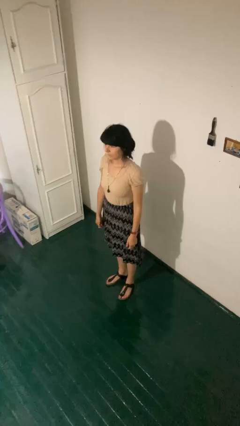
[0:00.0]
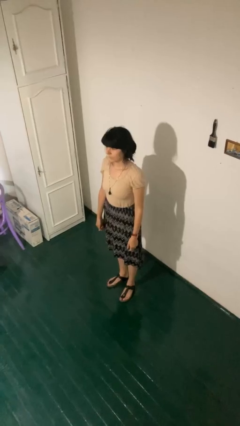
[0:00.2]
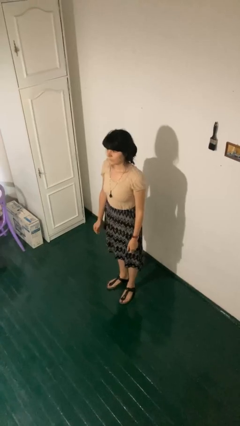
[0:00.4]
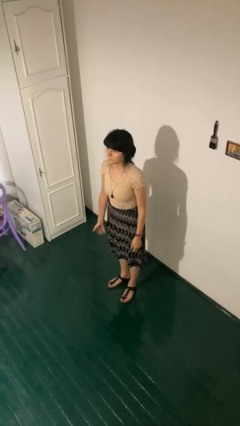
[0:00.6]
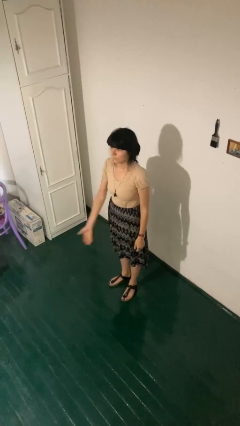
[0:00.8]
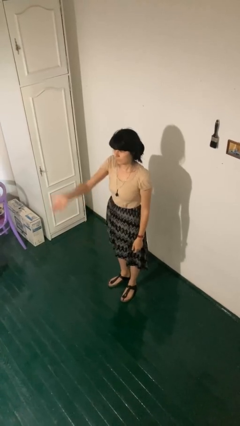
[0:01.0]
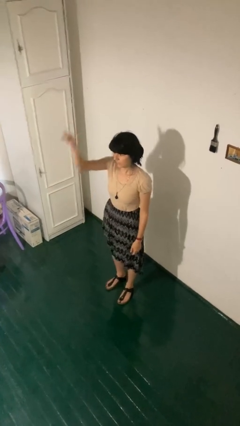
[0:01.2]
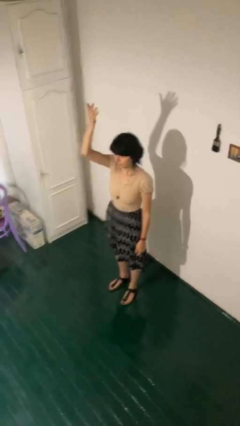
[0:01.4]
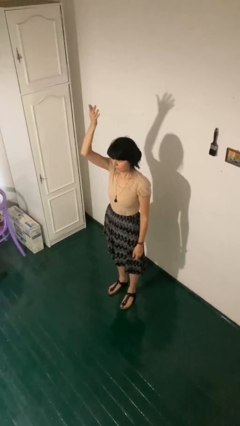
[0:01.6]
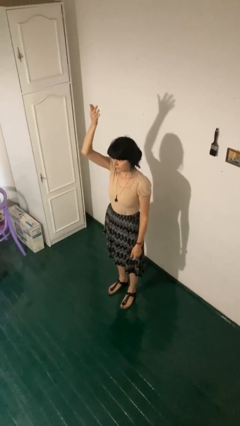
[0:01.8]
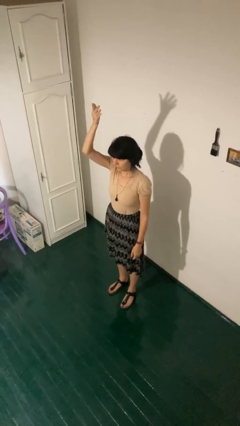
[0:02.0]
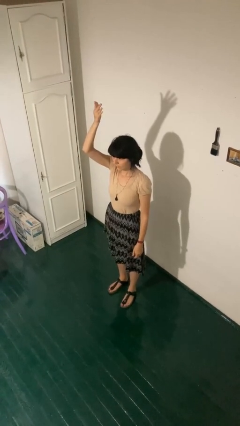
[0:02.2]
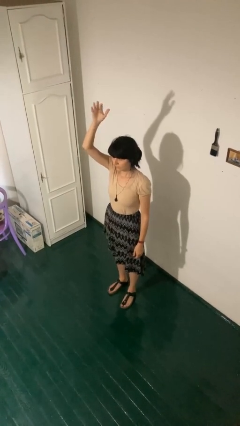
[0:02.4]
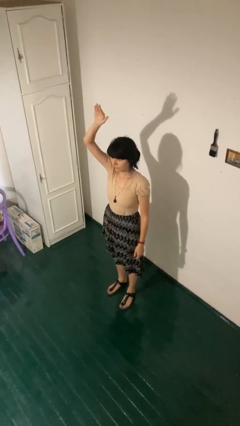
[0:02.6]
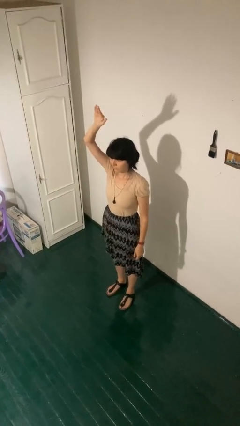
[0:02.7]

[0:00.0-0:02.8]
person gestures swipe up

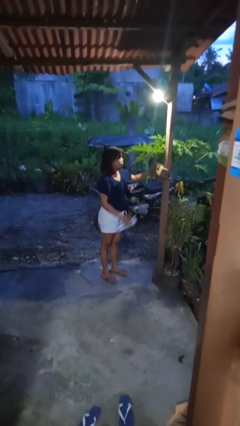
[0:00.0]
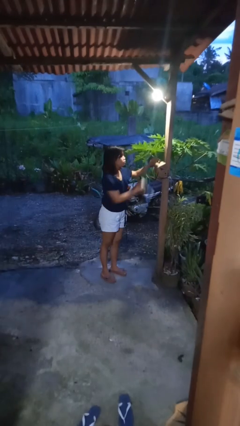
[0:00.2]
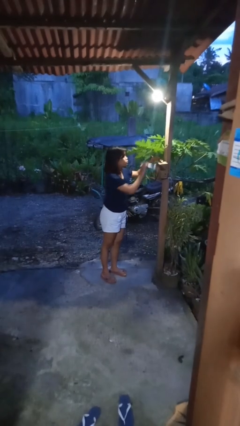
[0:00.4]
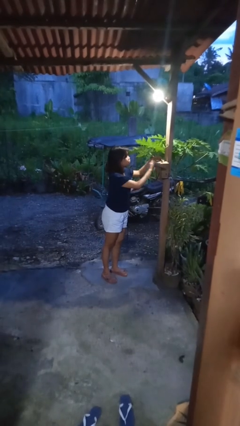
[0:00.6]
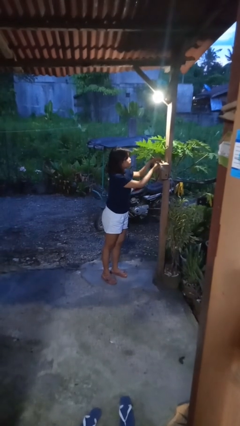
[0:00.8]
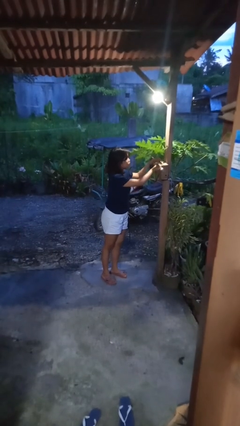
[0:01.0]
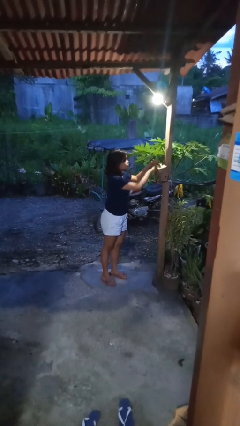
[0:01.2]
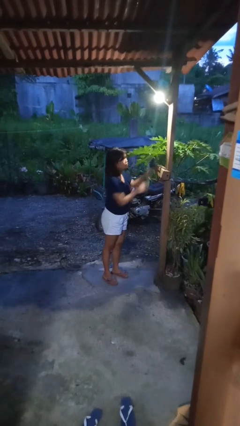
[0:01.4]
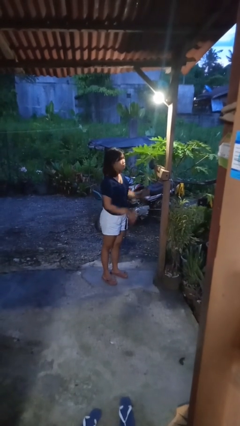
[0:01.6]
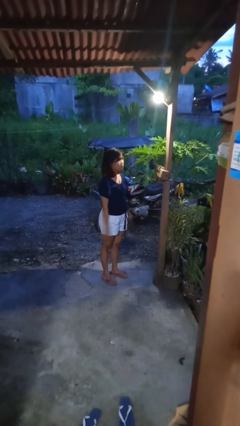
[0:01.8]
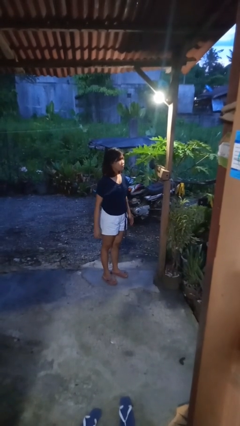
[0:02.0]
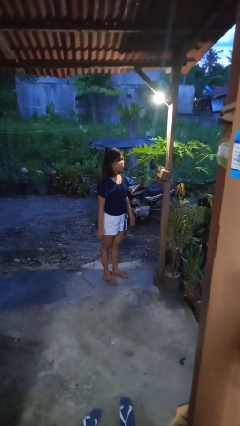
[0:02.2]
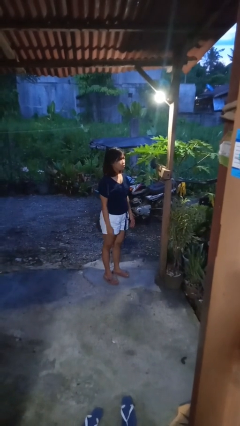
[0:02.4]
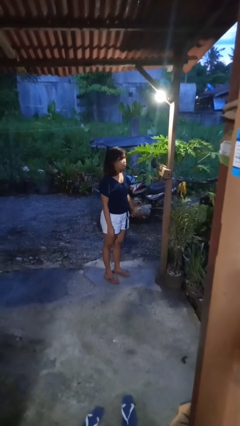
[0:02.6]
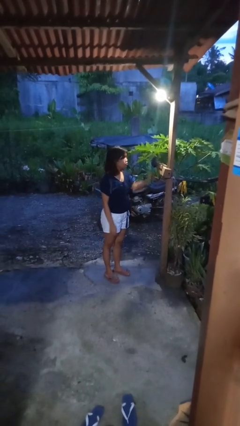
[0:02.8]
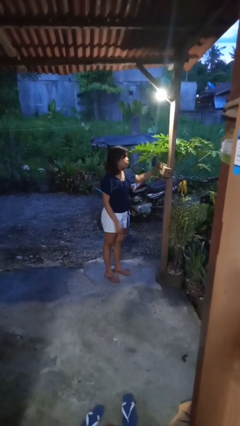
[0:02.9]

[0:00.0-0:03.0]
person puts letters in mailbox

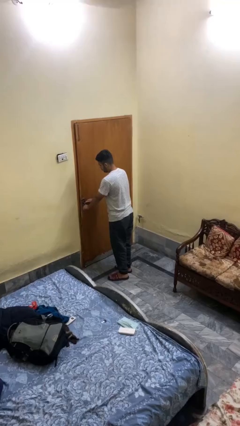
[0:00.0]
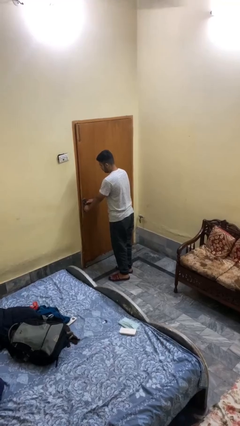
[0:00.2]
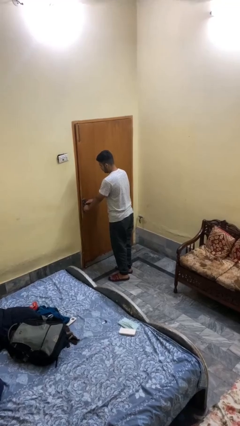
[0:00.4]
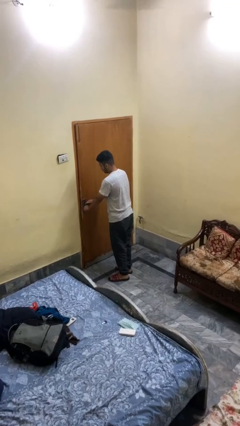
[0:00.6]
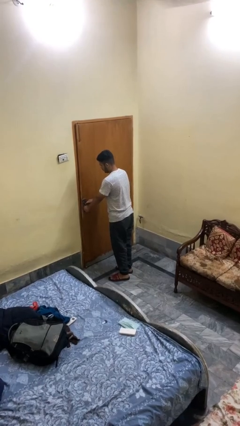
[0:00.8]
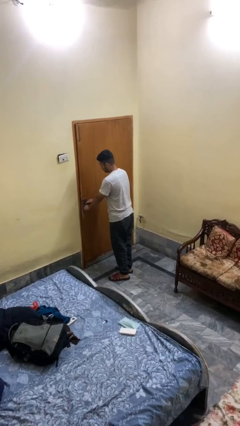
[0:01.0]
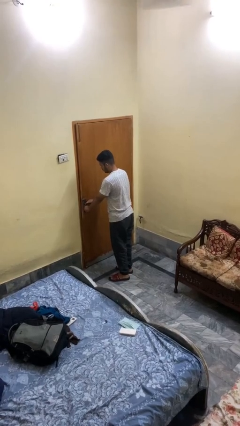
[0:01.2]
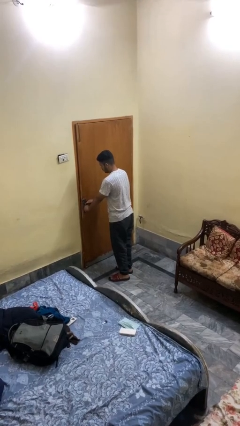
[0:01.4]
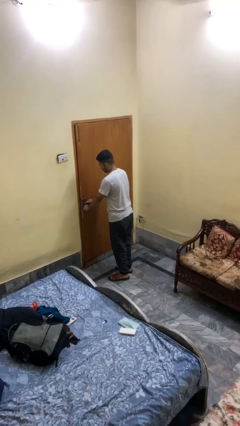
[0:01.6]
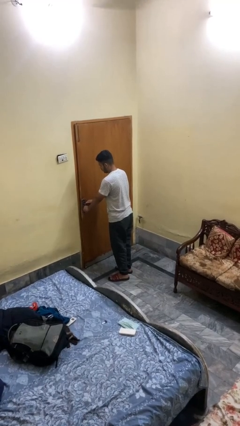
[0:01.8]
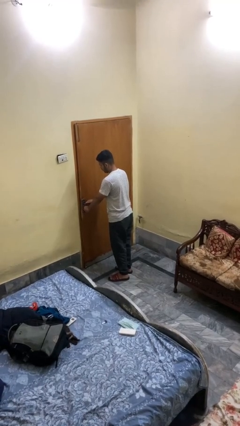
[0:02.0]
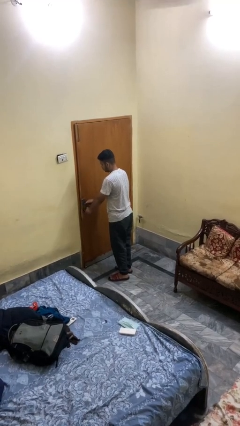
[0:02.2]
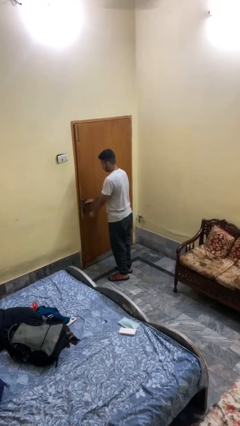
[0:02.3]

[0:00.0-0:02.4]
person locks door with keys

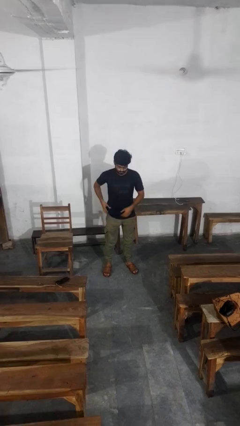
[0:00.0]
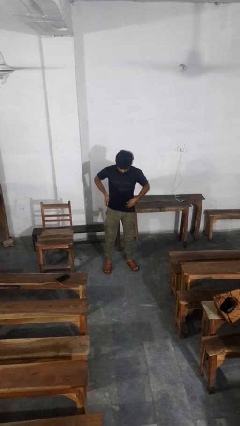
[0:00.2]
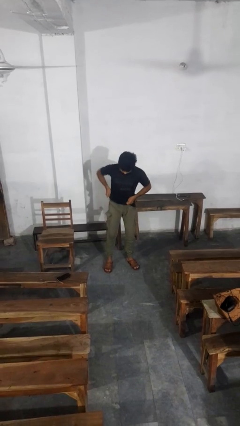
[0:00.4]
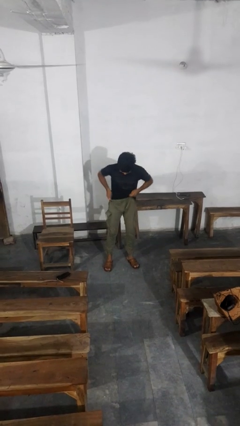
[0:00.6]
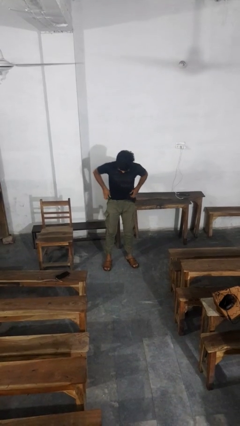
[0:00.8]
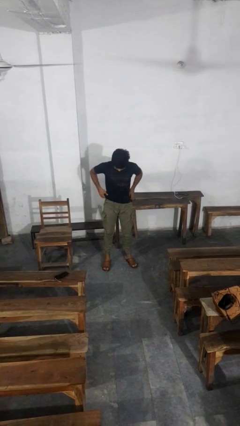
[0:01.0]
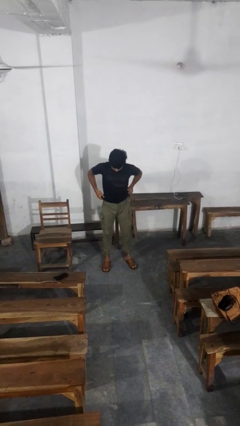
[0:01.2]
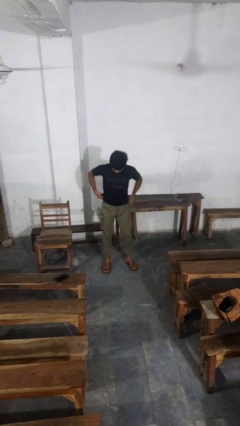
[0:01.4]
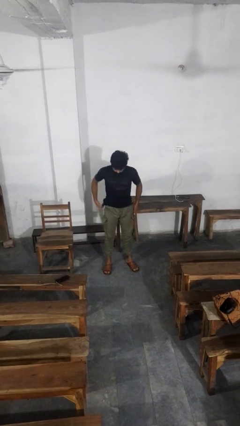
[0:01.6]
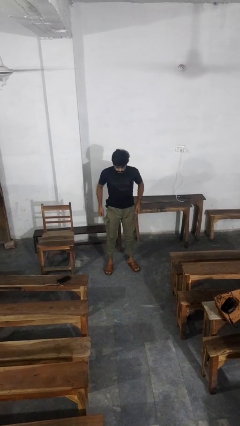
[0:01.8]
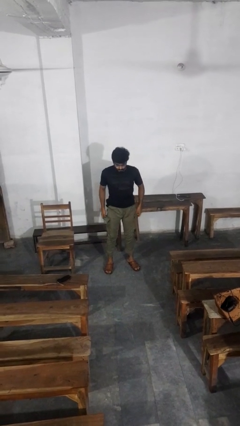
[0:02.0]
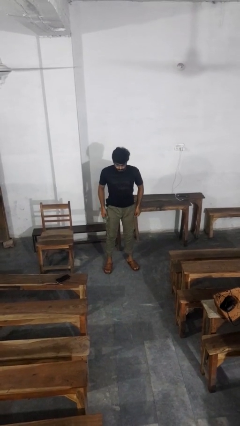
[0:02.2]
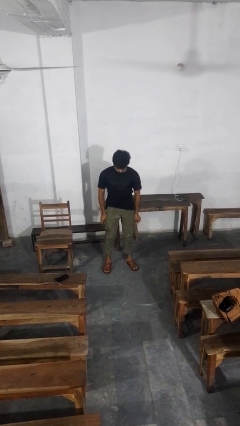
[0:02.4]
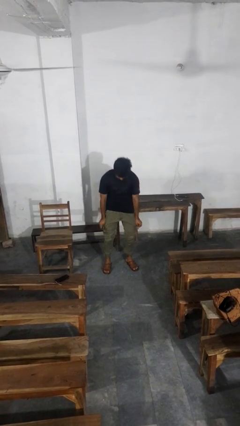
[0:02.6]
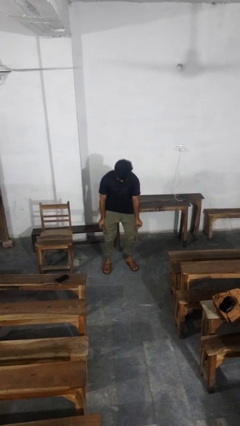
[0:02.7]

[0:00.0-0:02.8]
person hikes up pants

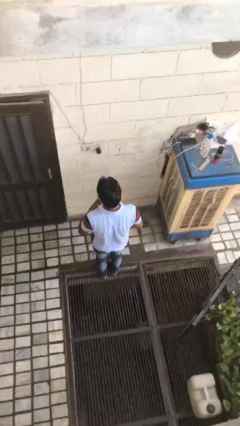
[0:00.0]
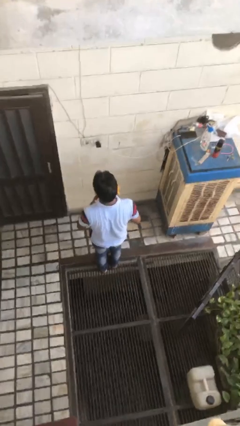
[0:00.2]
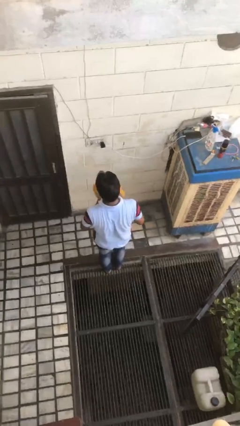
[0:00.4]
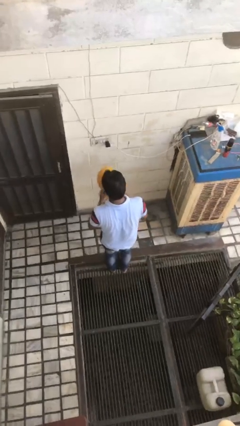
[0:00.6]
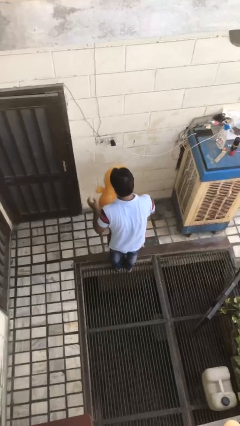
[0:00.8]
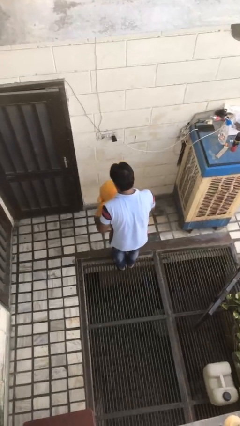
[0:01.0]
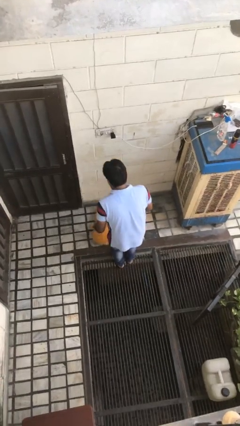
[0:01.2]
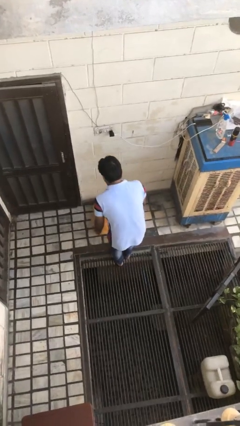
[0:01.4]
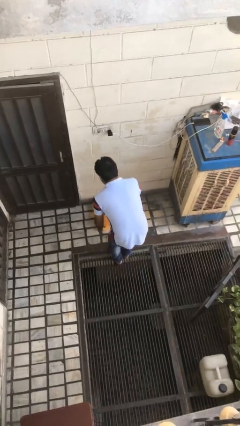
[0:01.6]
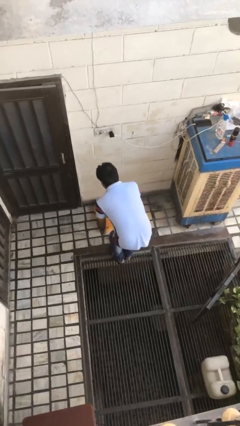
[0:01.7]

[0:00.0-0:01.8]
person throws object to ground

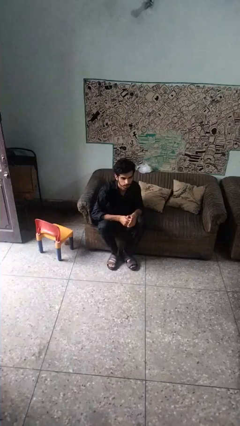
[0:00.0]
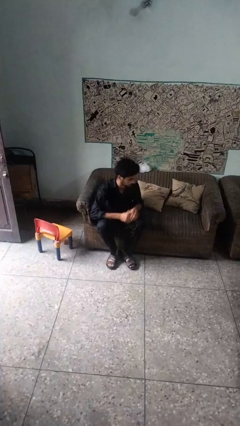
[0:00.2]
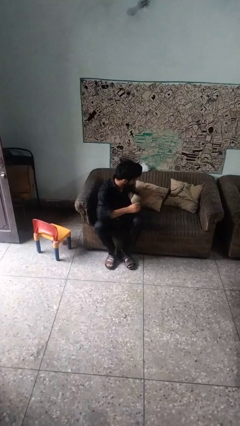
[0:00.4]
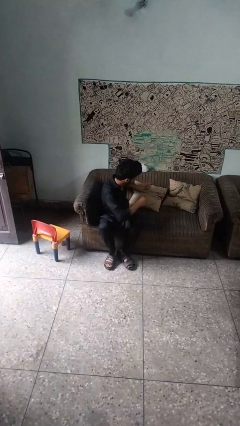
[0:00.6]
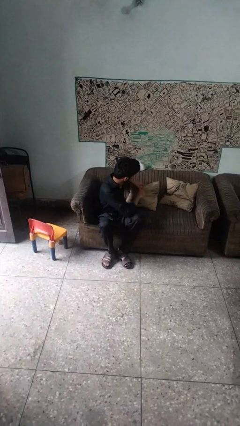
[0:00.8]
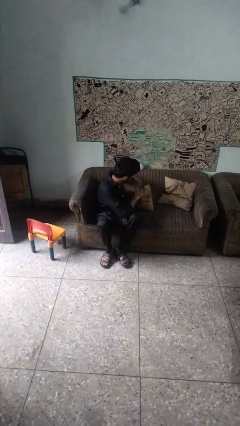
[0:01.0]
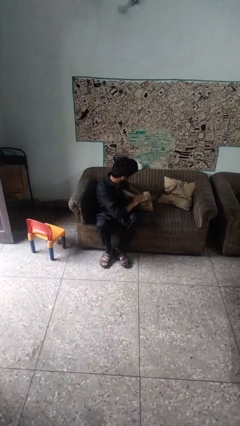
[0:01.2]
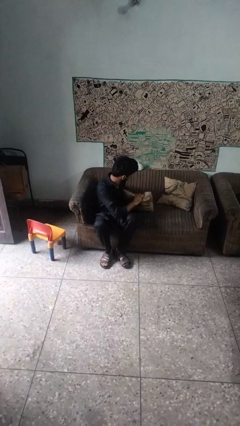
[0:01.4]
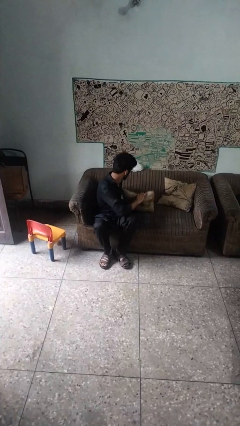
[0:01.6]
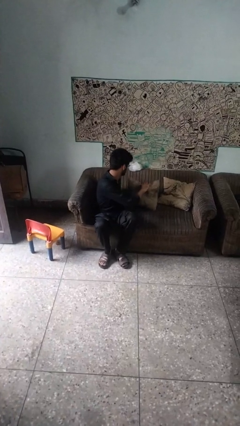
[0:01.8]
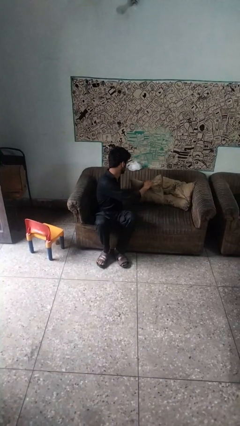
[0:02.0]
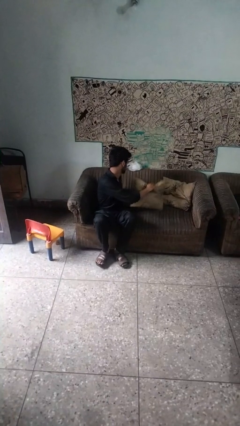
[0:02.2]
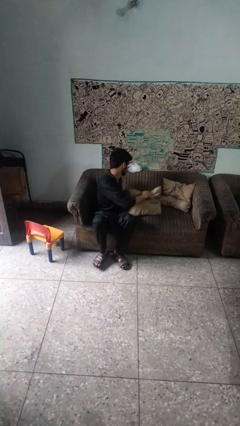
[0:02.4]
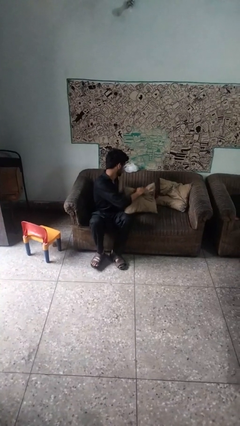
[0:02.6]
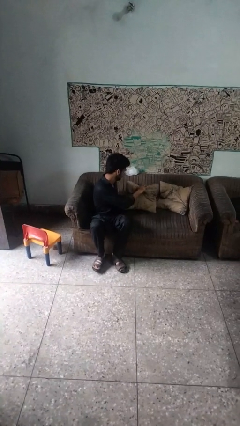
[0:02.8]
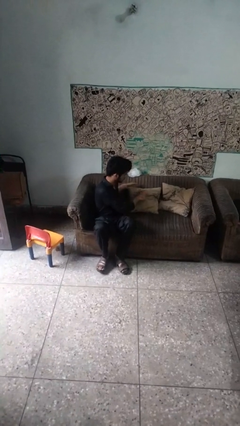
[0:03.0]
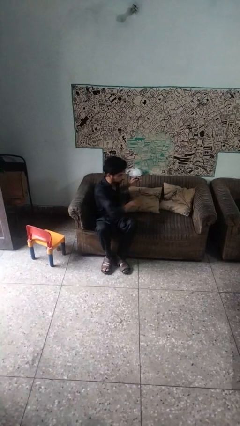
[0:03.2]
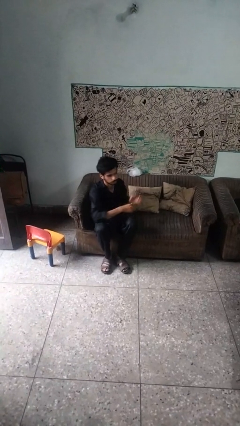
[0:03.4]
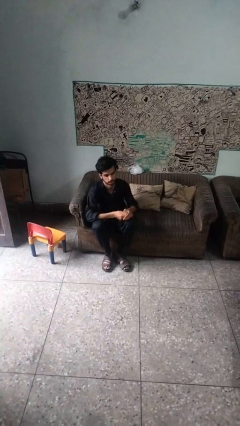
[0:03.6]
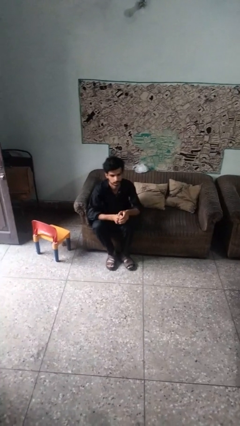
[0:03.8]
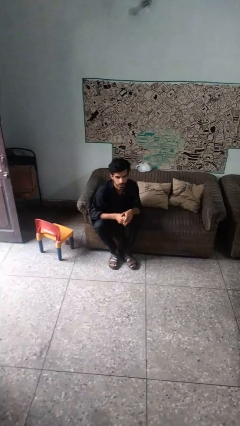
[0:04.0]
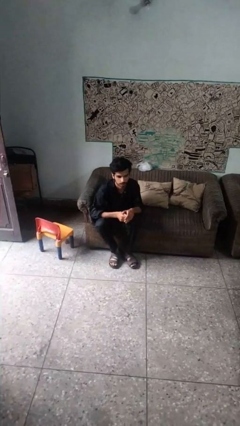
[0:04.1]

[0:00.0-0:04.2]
person searches in couch

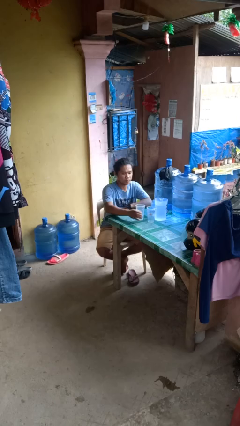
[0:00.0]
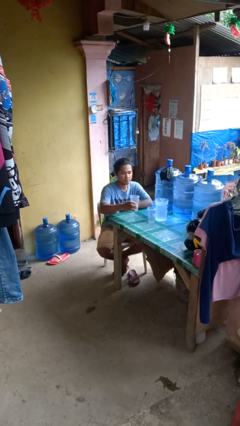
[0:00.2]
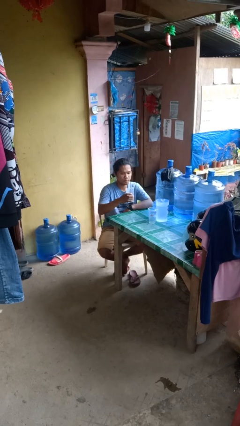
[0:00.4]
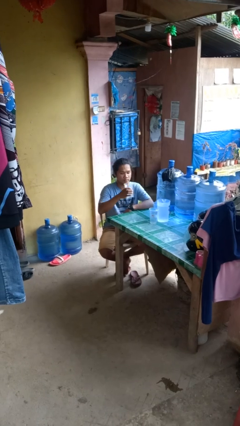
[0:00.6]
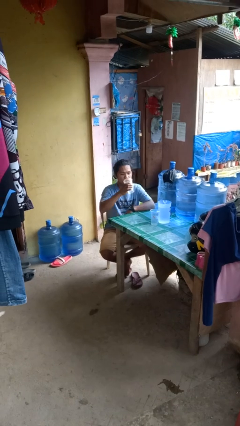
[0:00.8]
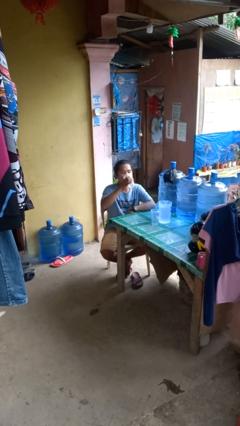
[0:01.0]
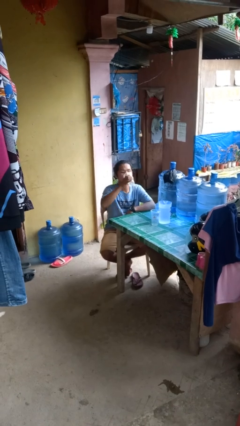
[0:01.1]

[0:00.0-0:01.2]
person picks up object from table
